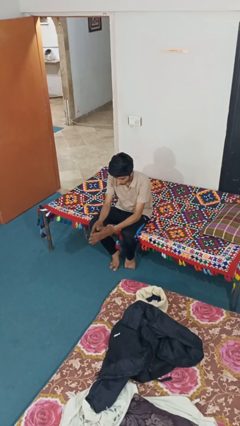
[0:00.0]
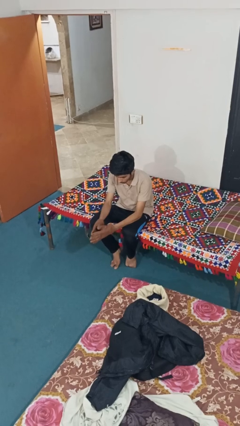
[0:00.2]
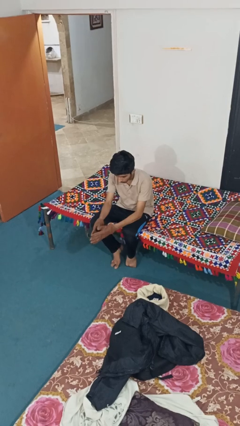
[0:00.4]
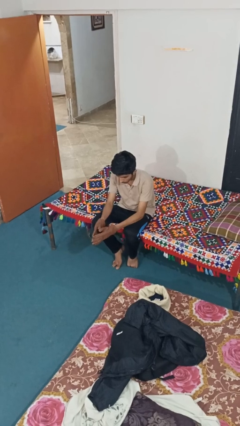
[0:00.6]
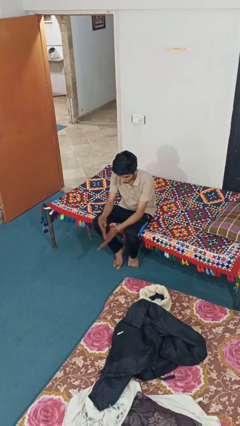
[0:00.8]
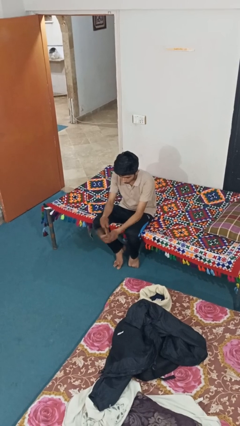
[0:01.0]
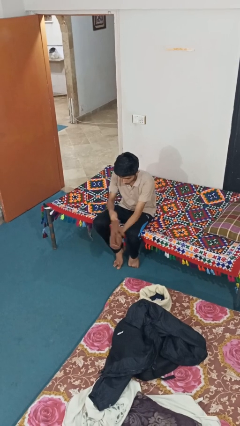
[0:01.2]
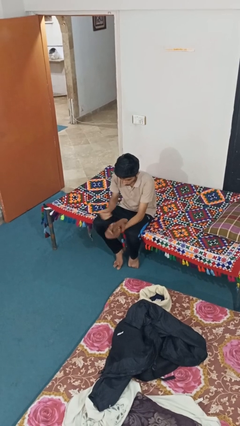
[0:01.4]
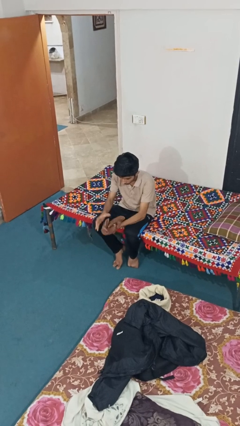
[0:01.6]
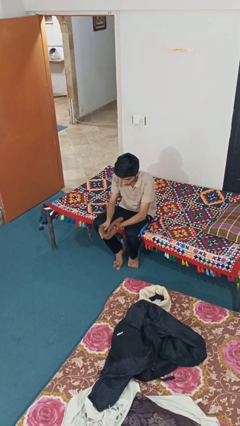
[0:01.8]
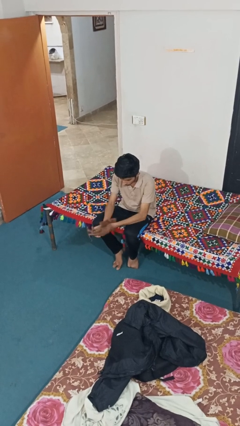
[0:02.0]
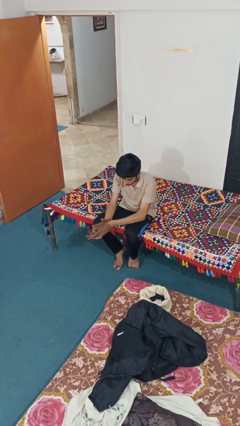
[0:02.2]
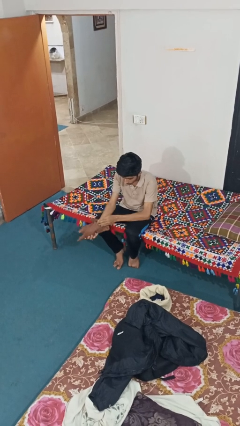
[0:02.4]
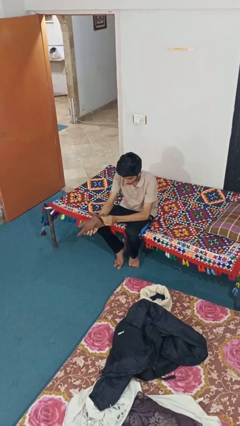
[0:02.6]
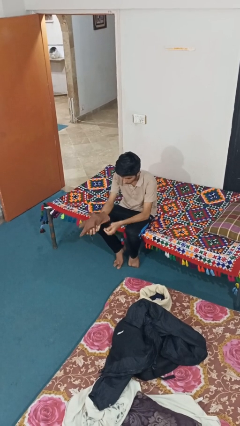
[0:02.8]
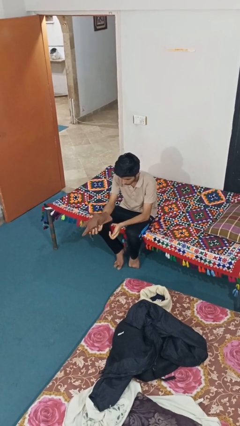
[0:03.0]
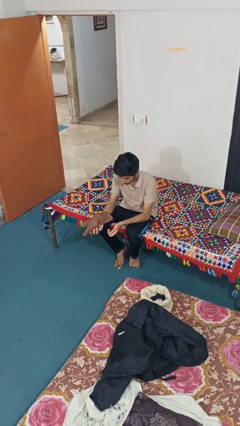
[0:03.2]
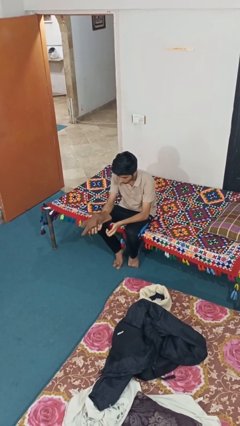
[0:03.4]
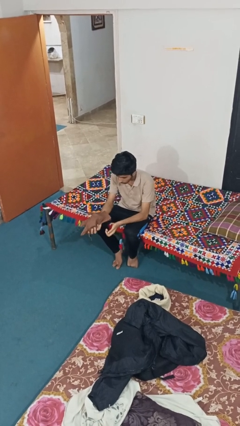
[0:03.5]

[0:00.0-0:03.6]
person takes off gloves

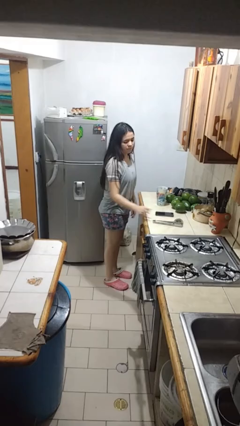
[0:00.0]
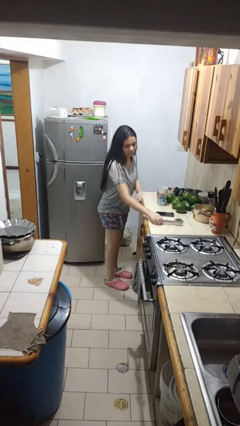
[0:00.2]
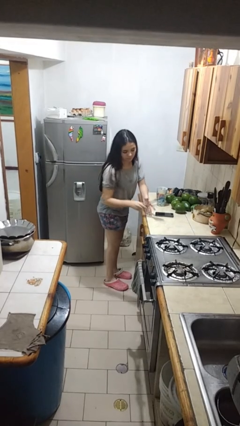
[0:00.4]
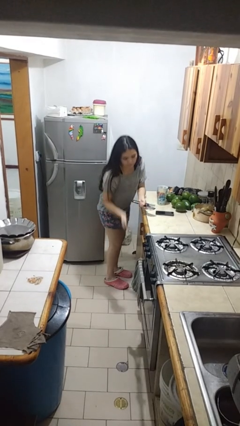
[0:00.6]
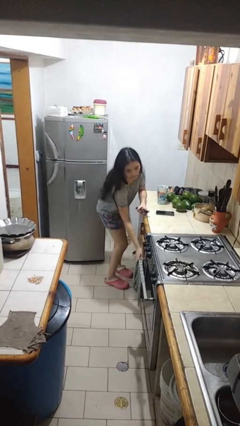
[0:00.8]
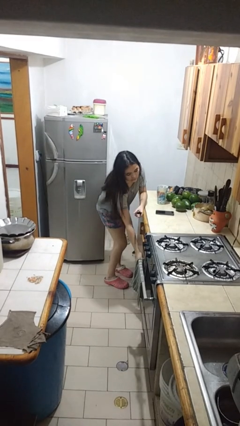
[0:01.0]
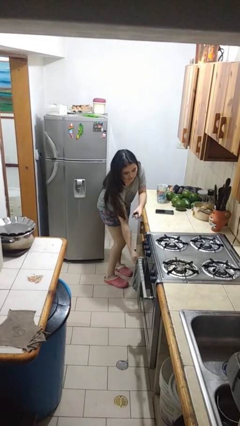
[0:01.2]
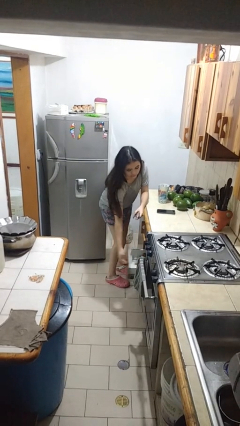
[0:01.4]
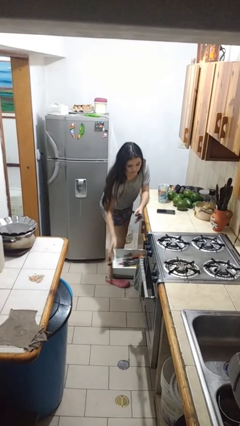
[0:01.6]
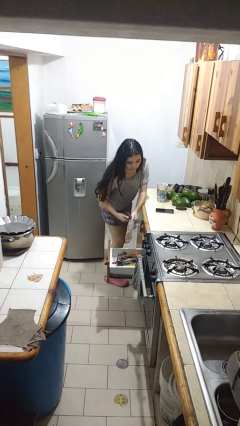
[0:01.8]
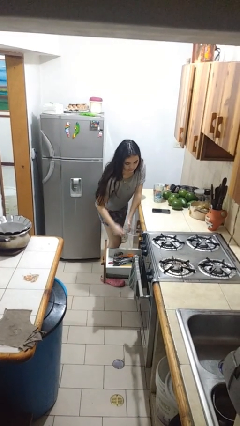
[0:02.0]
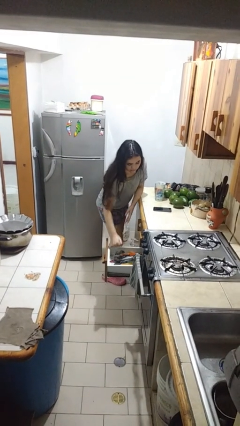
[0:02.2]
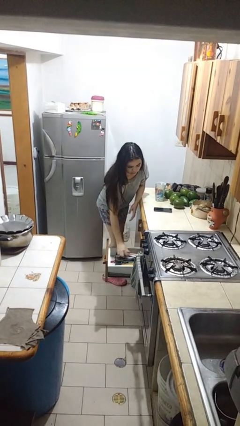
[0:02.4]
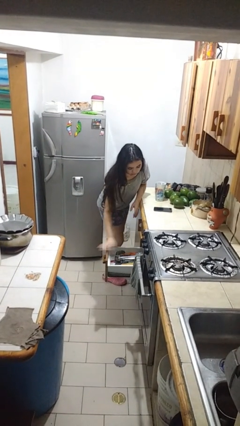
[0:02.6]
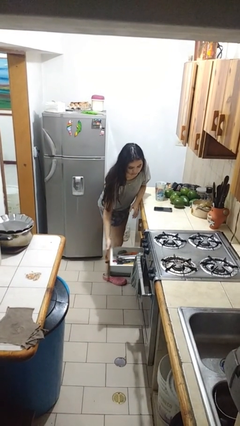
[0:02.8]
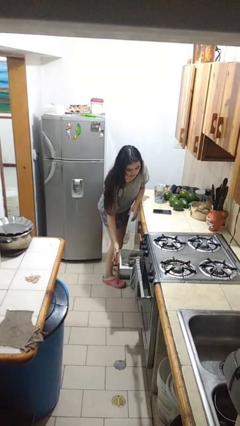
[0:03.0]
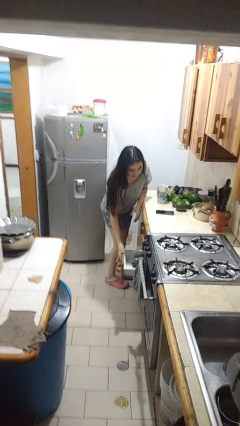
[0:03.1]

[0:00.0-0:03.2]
person puts object into kitchen drawer

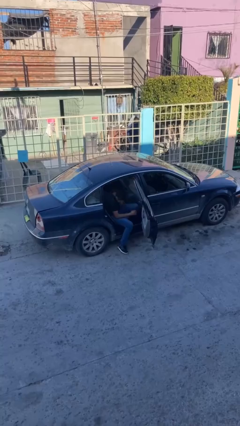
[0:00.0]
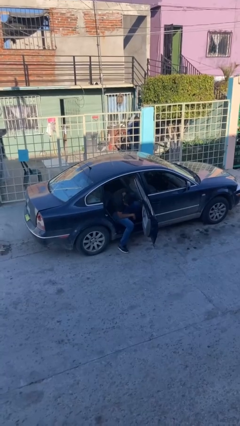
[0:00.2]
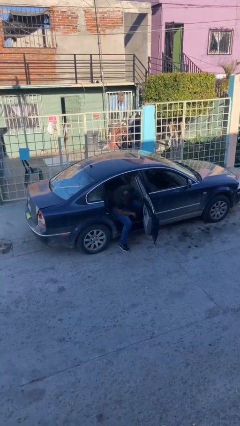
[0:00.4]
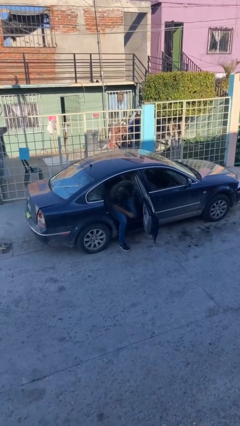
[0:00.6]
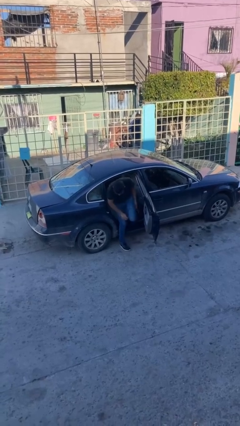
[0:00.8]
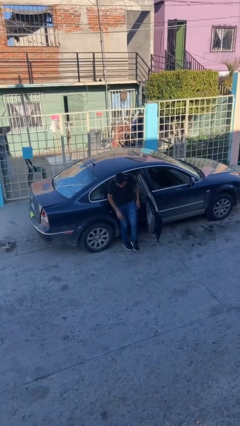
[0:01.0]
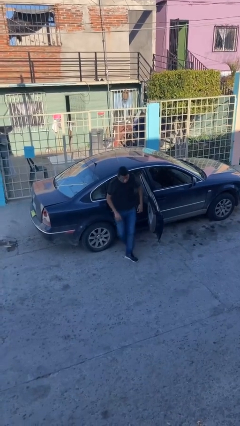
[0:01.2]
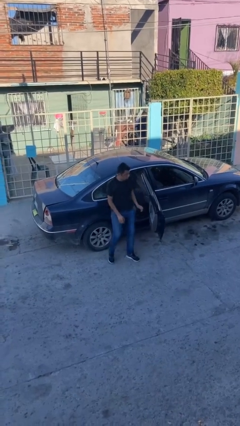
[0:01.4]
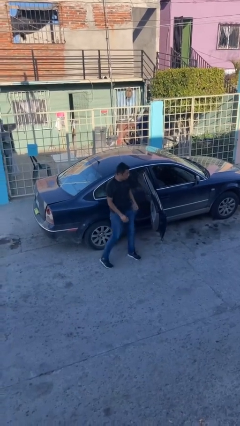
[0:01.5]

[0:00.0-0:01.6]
person exits car

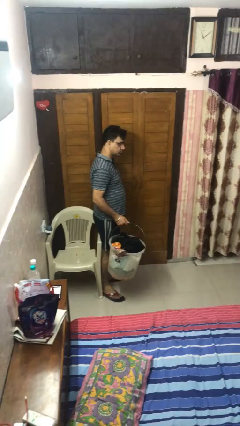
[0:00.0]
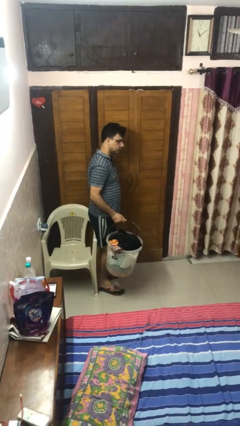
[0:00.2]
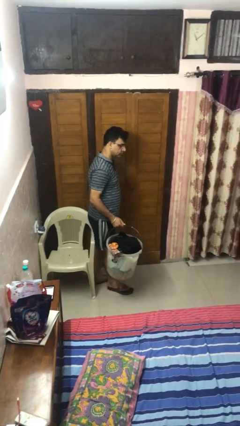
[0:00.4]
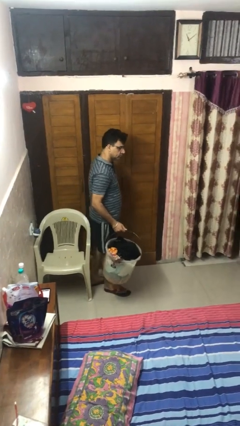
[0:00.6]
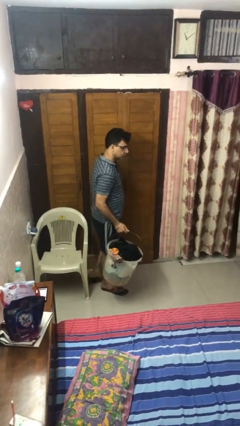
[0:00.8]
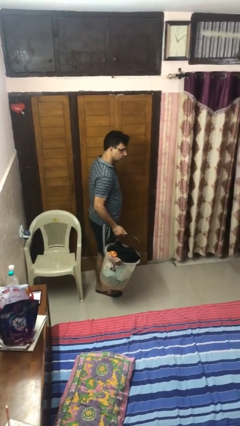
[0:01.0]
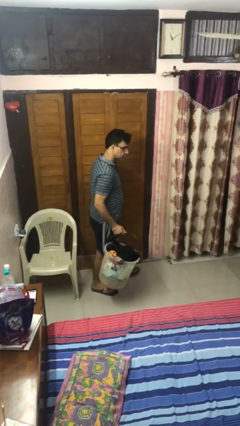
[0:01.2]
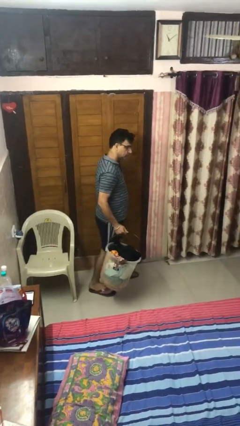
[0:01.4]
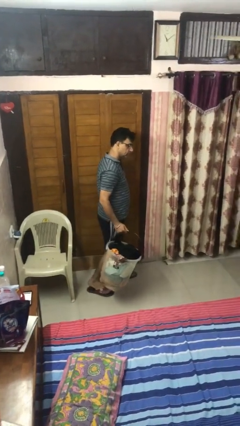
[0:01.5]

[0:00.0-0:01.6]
person carries laundry basket

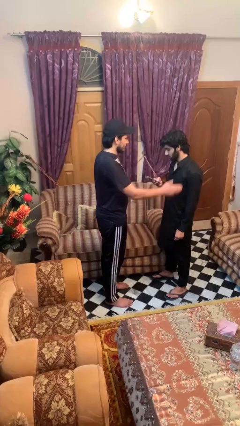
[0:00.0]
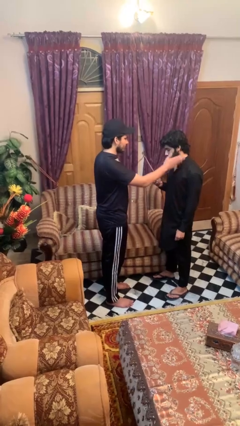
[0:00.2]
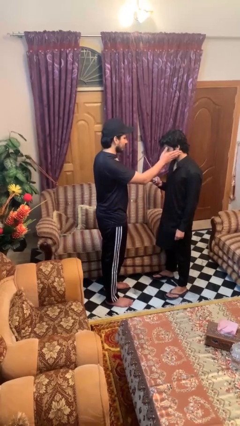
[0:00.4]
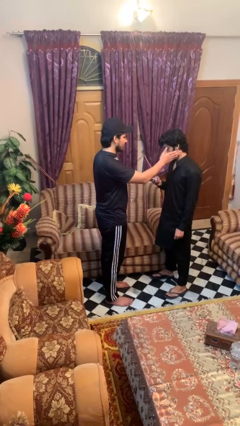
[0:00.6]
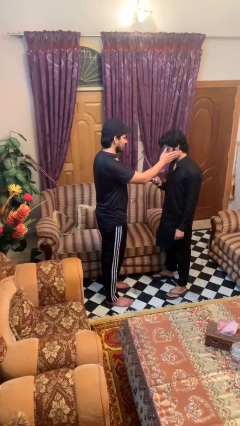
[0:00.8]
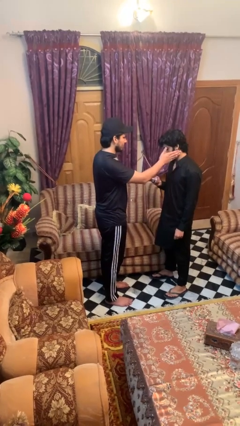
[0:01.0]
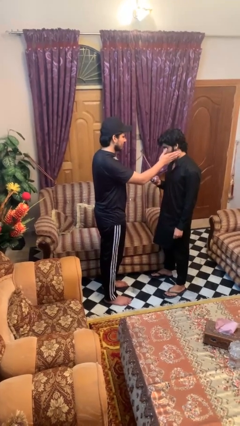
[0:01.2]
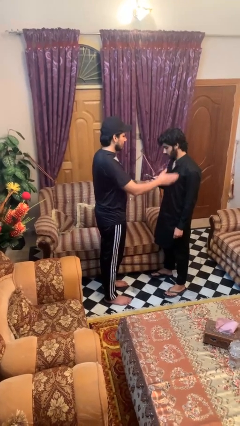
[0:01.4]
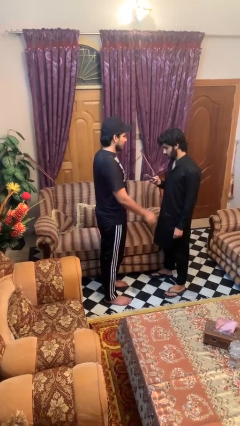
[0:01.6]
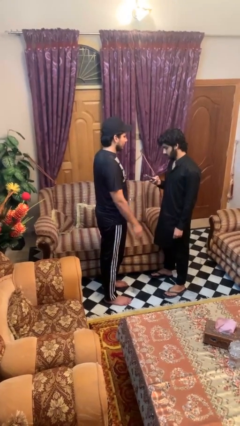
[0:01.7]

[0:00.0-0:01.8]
person touches face of person

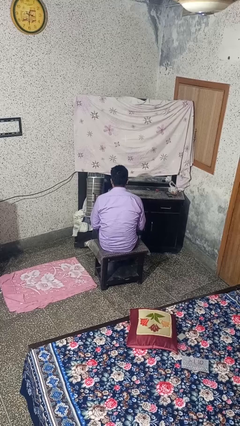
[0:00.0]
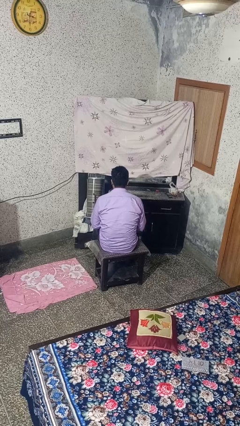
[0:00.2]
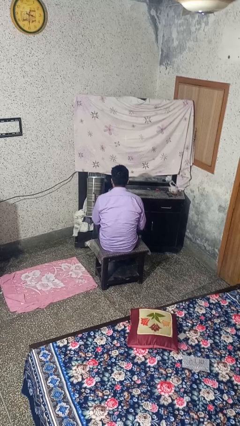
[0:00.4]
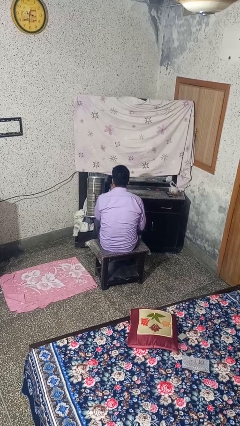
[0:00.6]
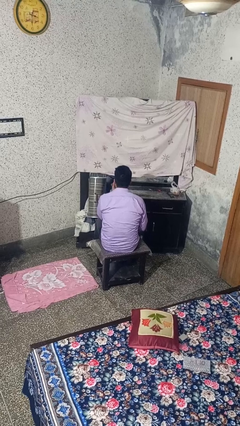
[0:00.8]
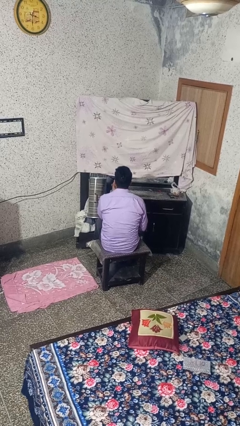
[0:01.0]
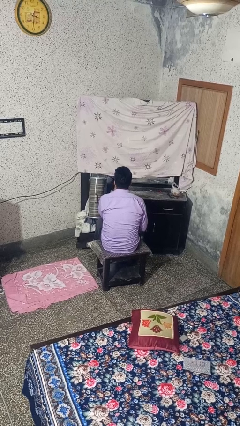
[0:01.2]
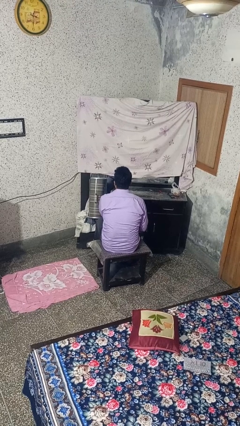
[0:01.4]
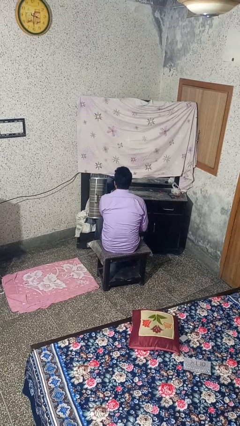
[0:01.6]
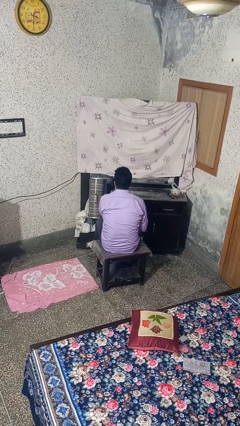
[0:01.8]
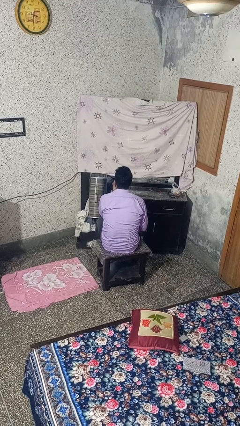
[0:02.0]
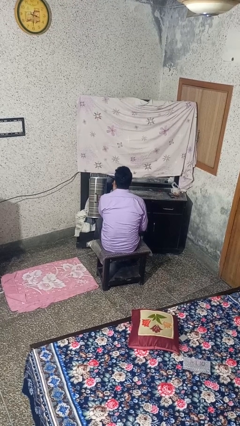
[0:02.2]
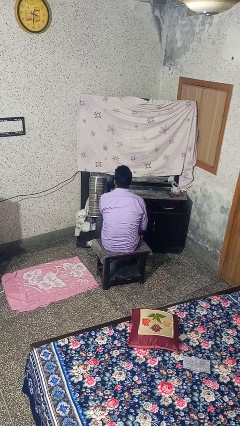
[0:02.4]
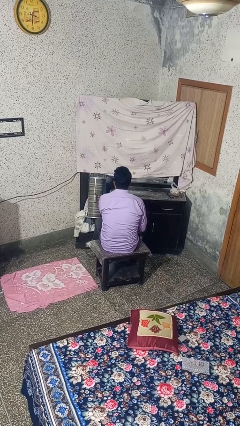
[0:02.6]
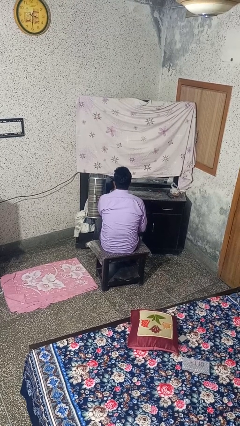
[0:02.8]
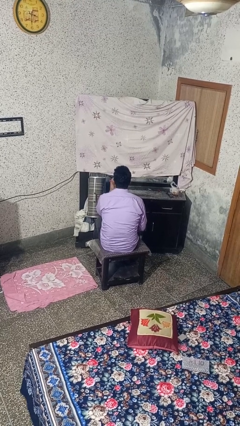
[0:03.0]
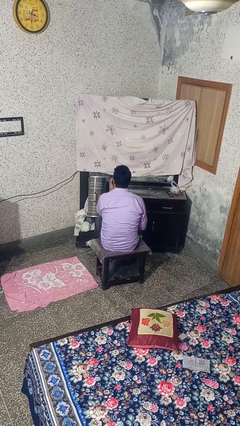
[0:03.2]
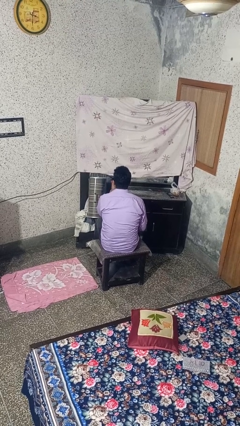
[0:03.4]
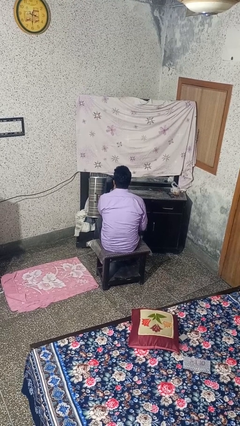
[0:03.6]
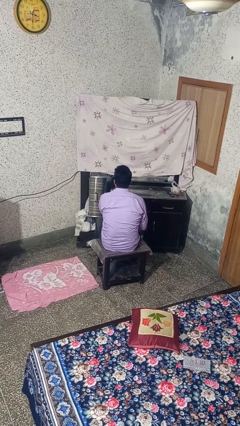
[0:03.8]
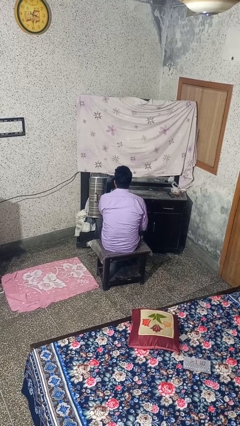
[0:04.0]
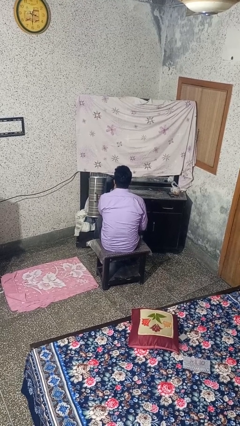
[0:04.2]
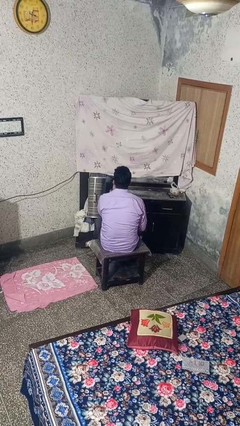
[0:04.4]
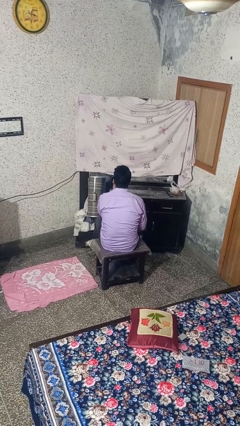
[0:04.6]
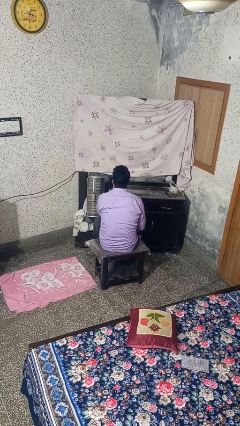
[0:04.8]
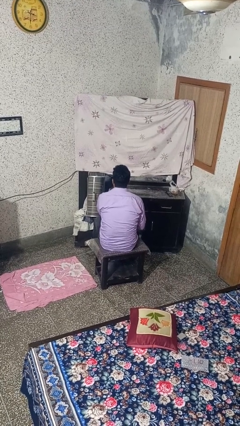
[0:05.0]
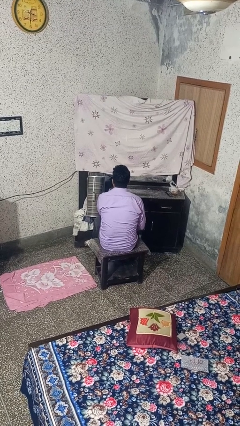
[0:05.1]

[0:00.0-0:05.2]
person applies lip makeup

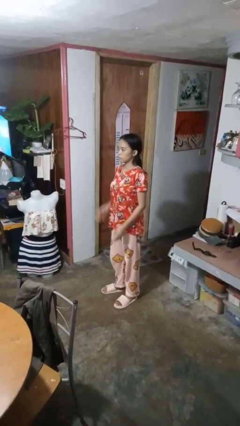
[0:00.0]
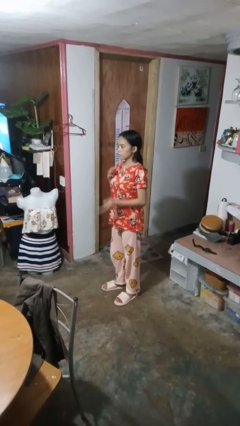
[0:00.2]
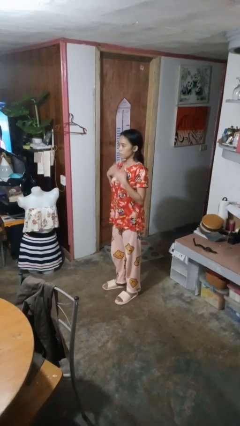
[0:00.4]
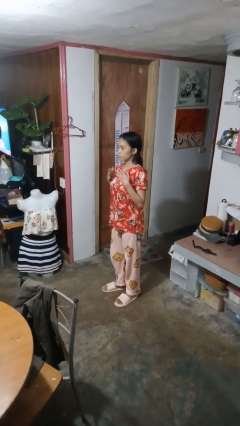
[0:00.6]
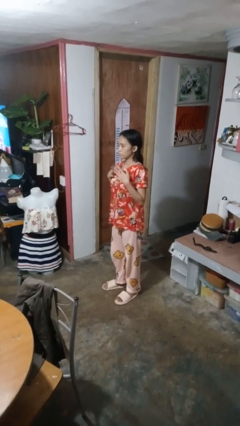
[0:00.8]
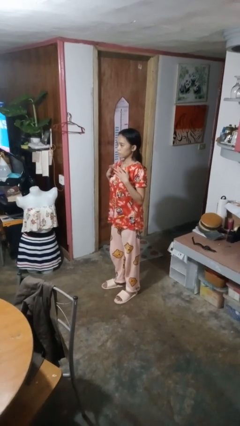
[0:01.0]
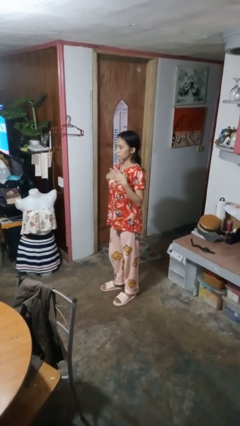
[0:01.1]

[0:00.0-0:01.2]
person drums on chest
